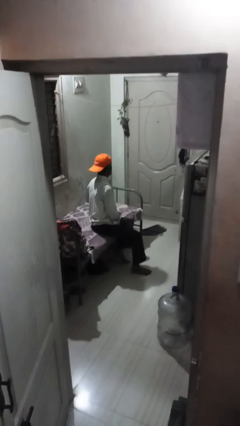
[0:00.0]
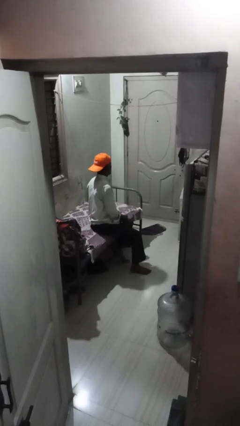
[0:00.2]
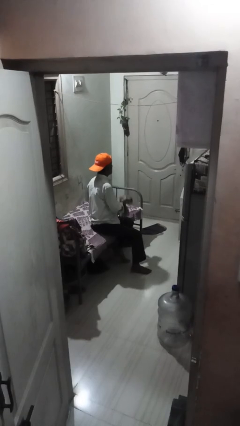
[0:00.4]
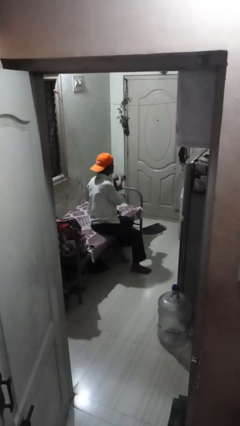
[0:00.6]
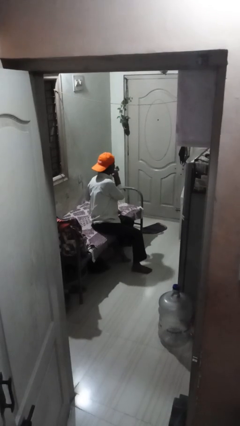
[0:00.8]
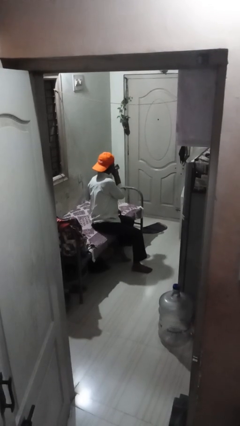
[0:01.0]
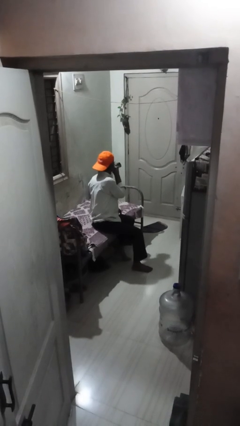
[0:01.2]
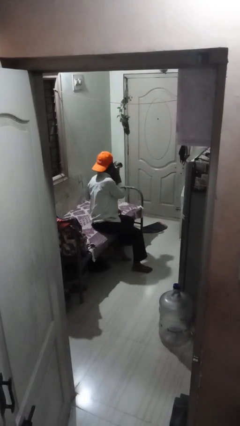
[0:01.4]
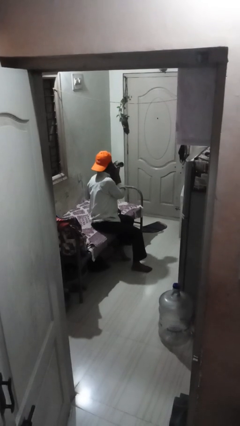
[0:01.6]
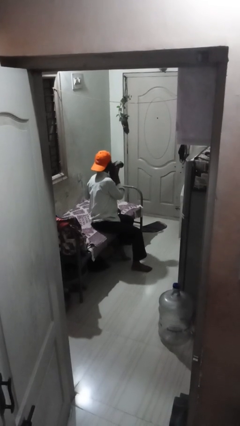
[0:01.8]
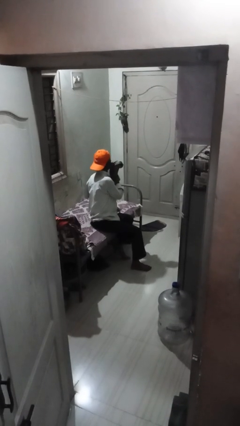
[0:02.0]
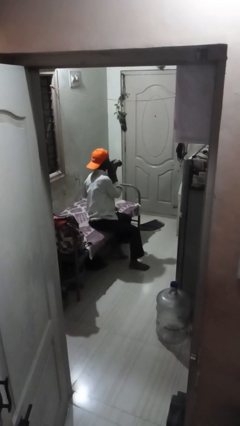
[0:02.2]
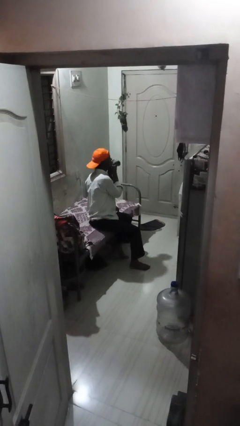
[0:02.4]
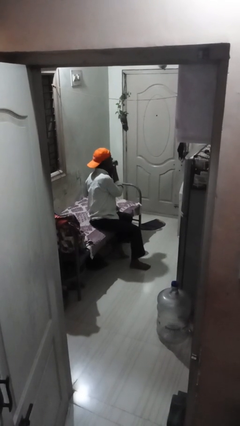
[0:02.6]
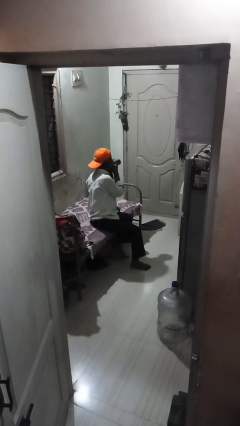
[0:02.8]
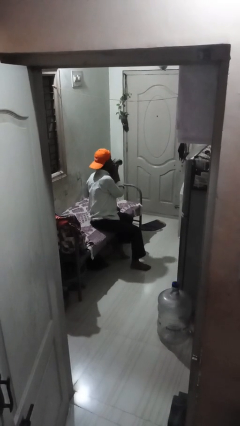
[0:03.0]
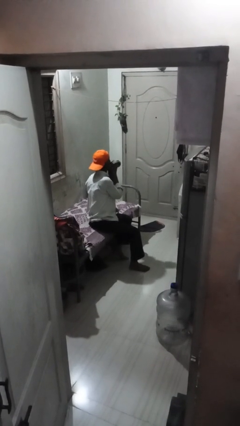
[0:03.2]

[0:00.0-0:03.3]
person wipes mouth with napkin

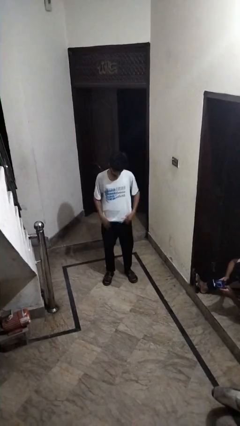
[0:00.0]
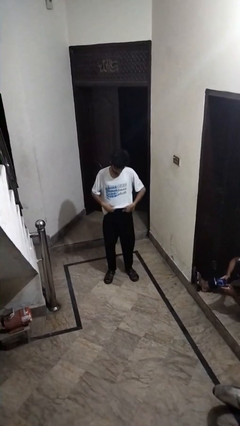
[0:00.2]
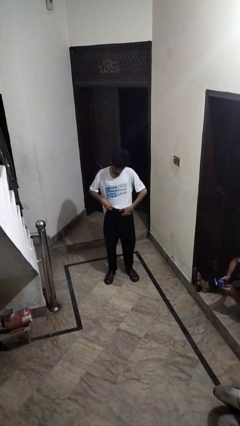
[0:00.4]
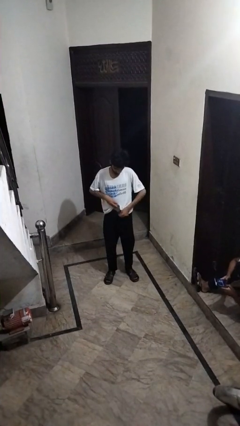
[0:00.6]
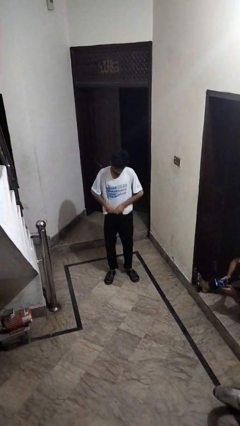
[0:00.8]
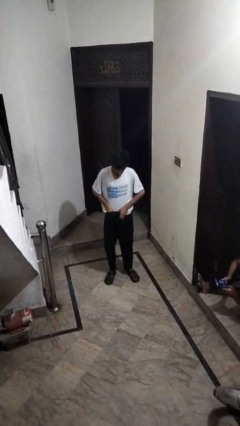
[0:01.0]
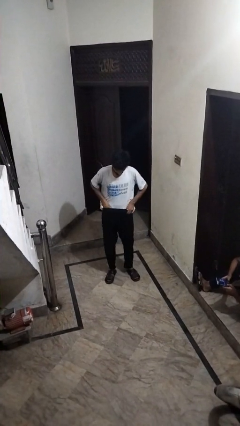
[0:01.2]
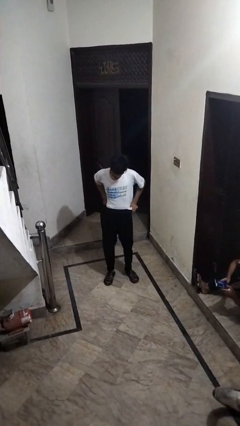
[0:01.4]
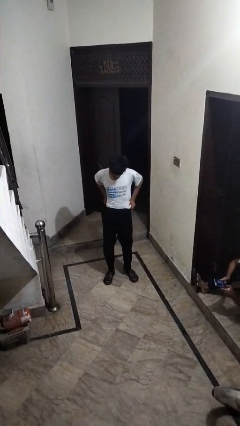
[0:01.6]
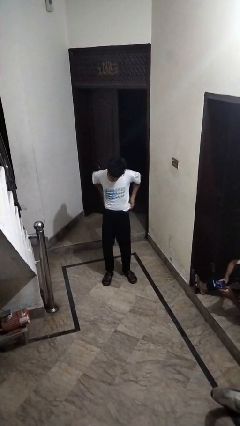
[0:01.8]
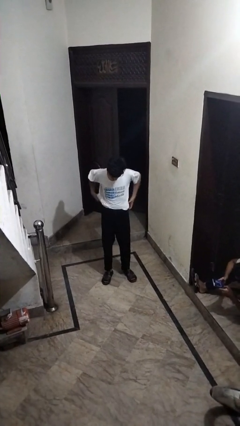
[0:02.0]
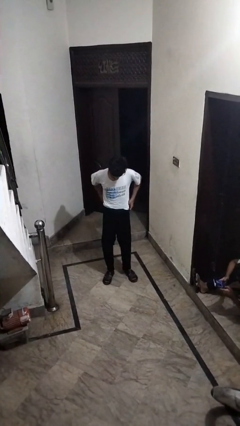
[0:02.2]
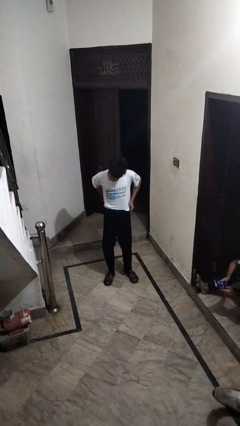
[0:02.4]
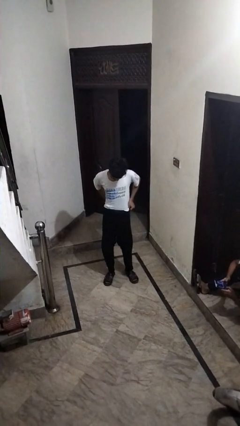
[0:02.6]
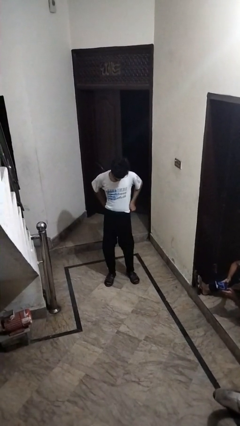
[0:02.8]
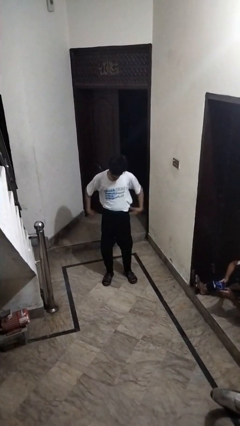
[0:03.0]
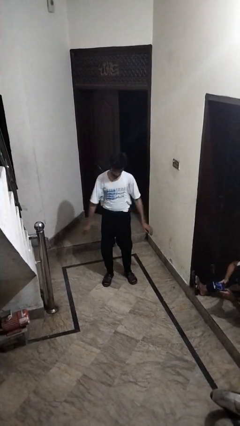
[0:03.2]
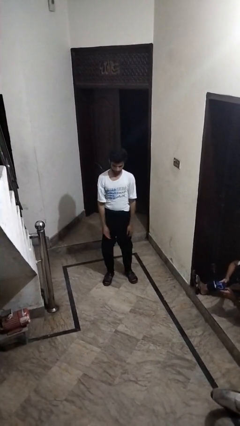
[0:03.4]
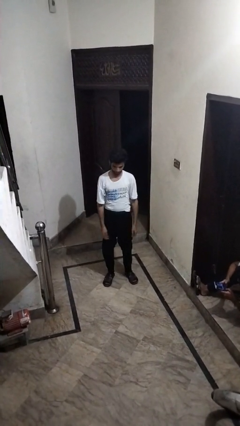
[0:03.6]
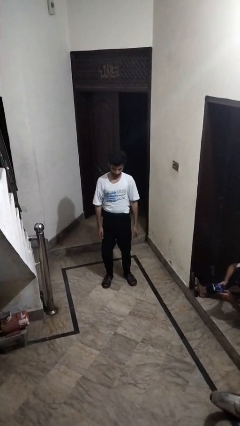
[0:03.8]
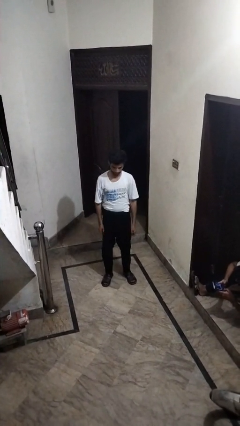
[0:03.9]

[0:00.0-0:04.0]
person tucks in shirt

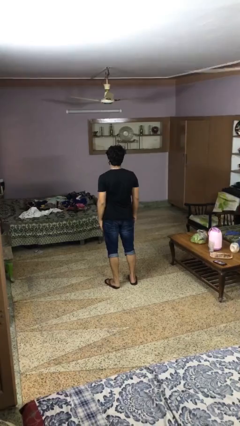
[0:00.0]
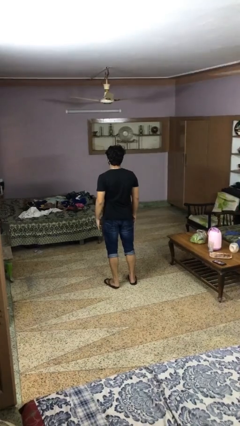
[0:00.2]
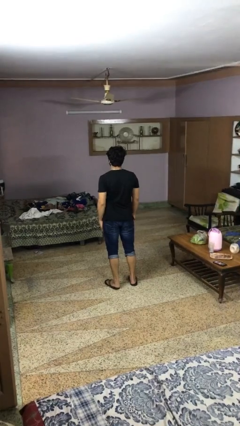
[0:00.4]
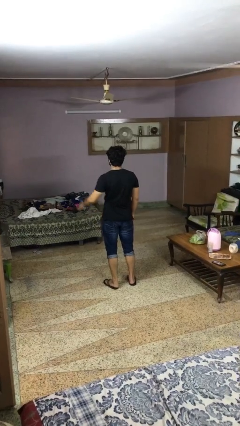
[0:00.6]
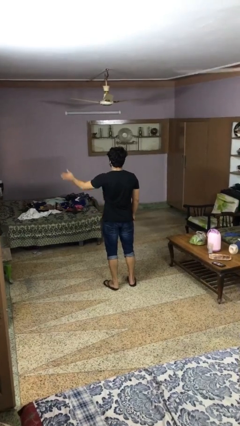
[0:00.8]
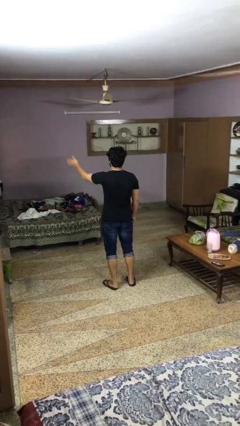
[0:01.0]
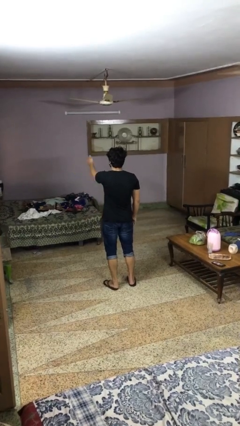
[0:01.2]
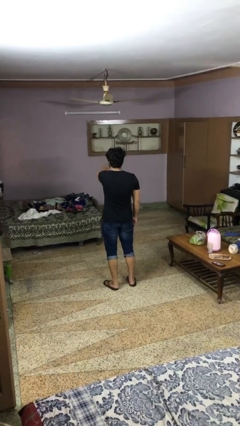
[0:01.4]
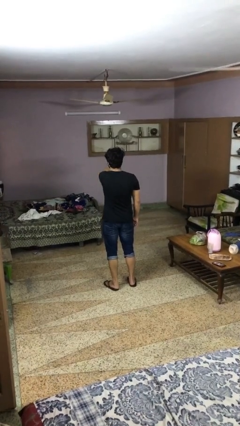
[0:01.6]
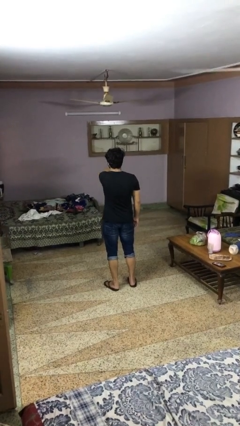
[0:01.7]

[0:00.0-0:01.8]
person gestures swipe right

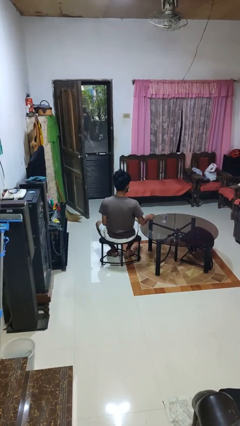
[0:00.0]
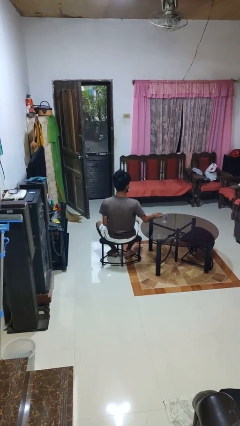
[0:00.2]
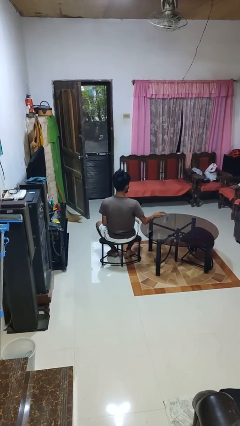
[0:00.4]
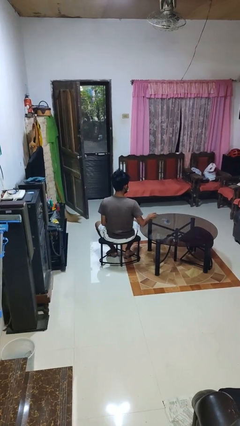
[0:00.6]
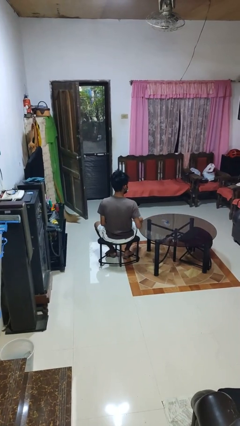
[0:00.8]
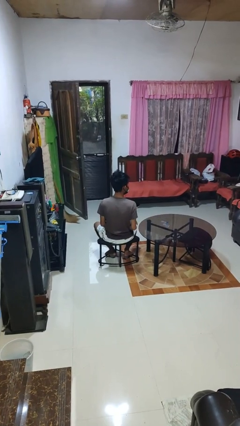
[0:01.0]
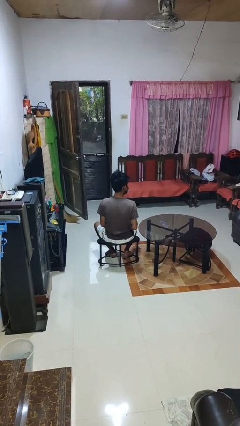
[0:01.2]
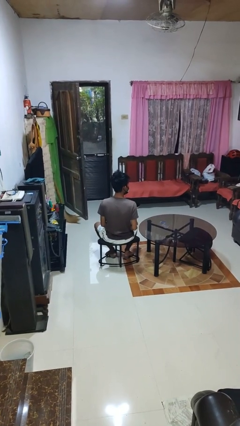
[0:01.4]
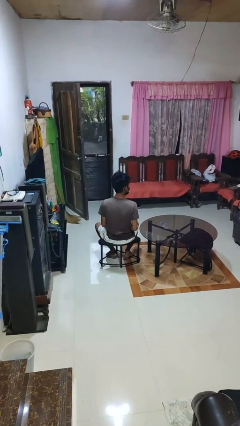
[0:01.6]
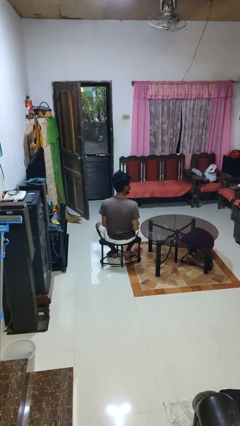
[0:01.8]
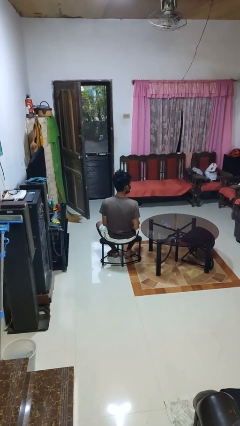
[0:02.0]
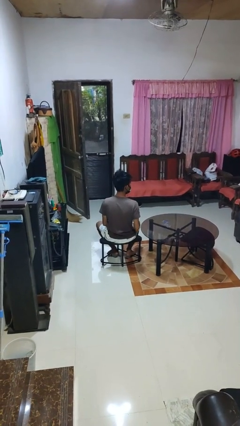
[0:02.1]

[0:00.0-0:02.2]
person knocks over glass

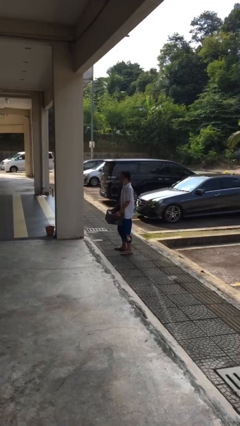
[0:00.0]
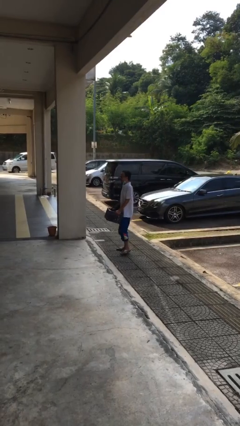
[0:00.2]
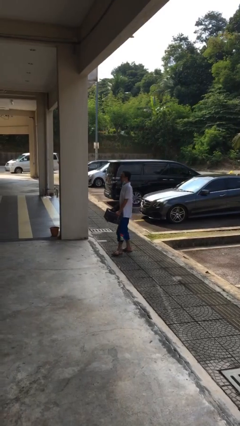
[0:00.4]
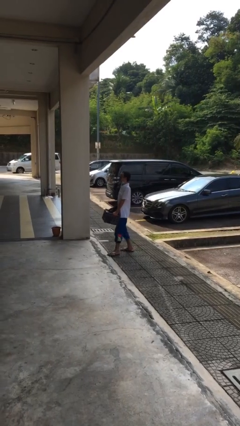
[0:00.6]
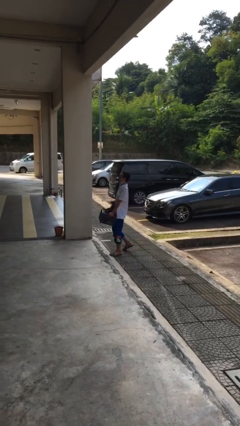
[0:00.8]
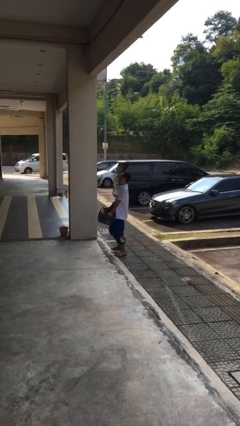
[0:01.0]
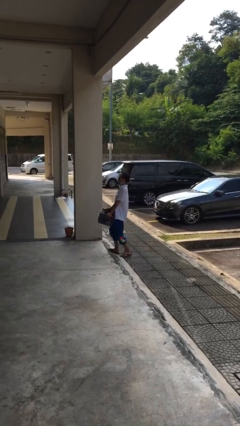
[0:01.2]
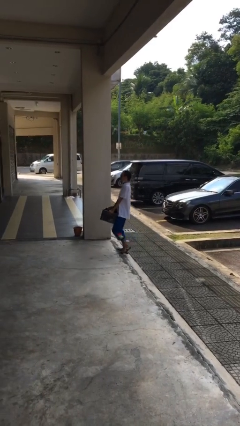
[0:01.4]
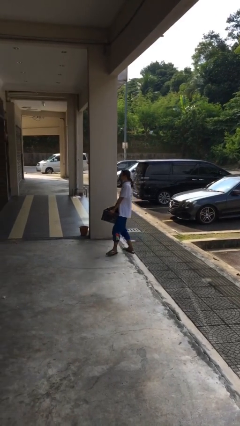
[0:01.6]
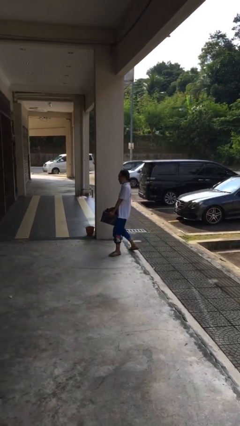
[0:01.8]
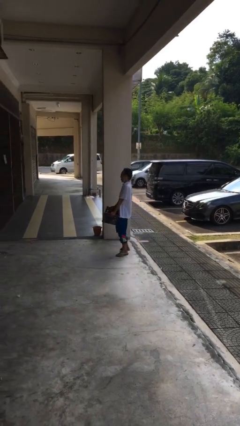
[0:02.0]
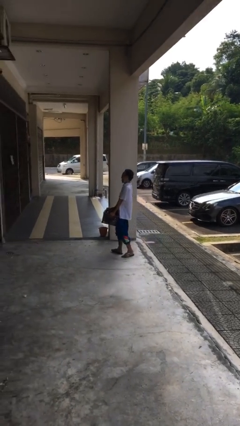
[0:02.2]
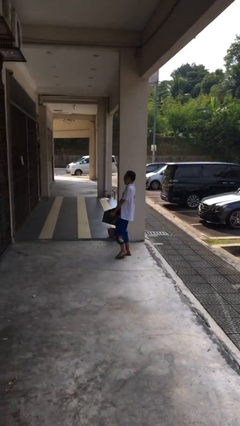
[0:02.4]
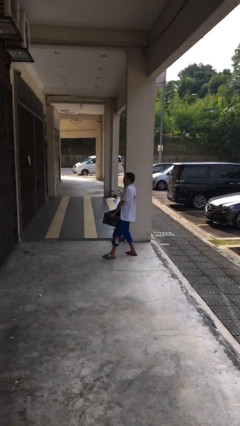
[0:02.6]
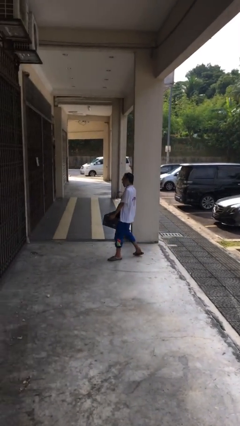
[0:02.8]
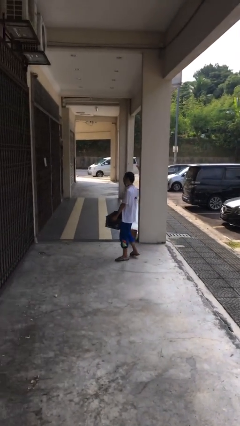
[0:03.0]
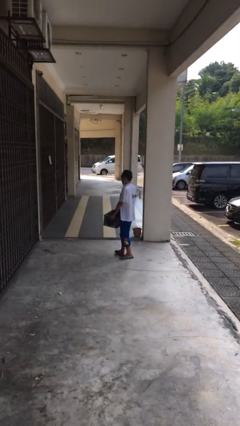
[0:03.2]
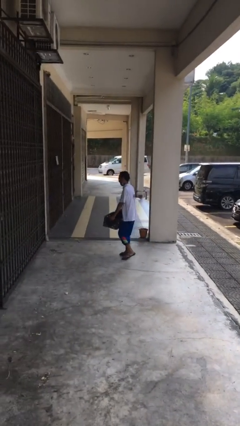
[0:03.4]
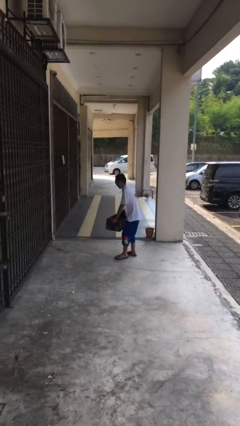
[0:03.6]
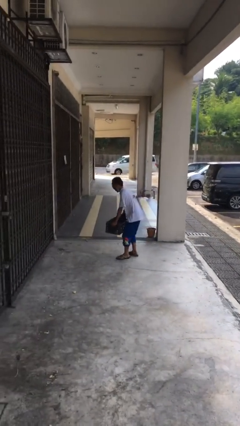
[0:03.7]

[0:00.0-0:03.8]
person carries heavy object

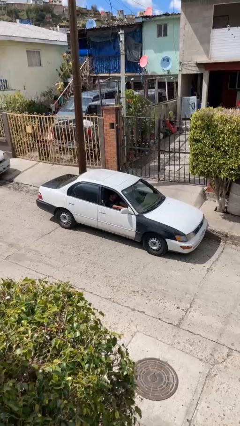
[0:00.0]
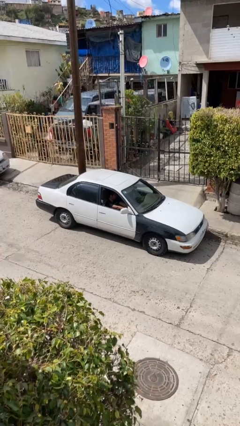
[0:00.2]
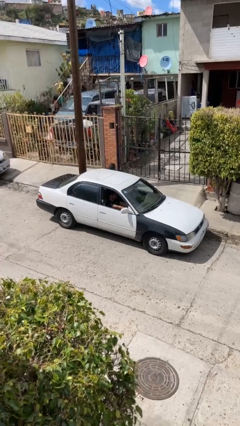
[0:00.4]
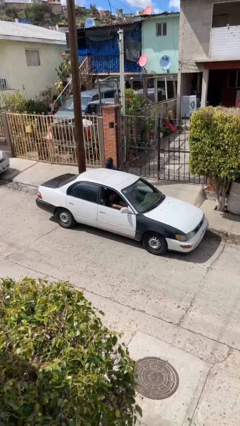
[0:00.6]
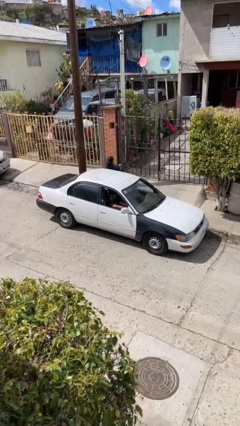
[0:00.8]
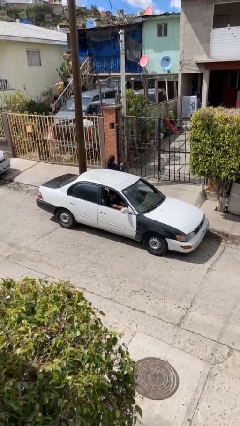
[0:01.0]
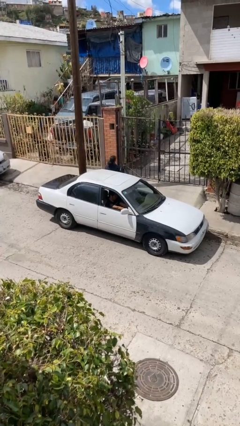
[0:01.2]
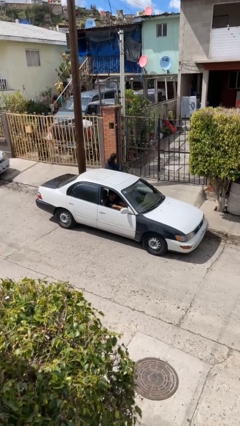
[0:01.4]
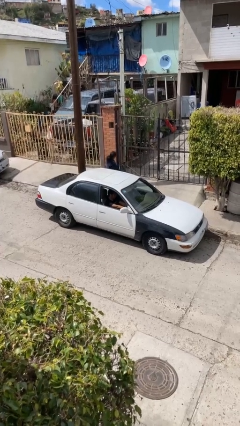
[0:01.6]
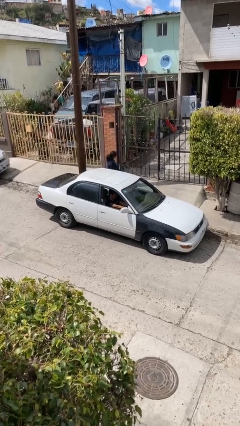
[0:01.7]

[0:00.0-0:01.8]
car drops off person

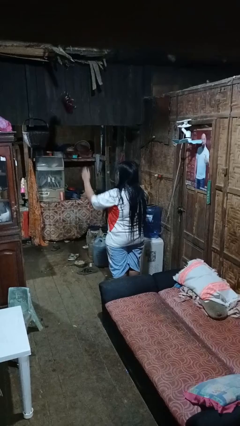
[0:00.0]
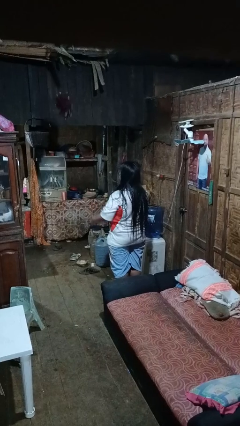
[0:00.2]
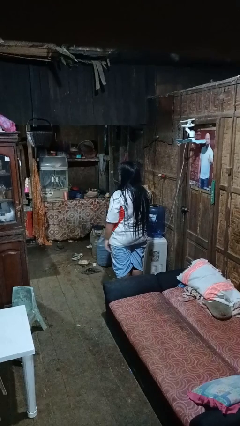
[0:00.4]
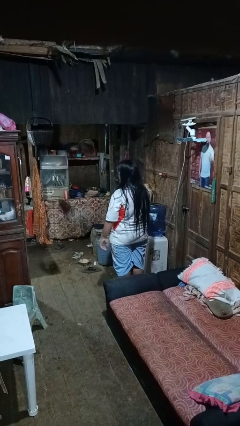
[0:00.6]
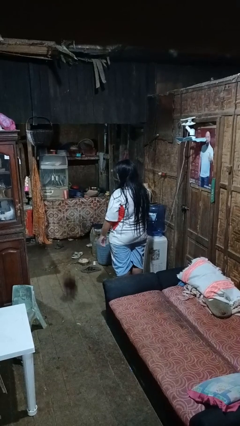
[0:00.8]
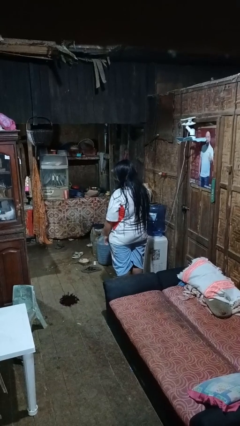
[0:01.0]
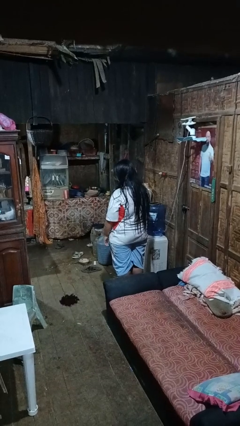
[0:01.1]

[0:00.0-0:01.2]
person throws object into air
